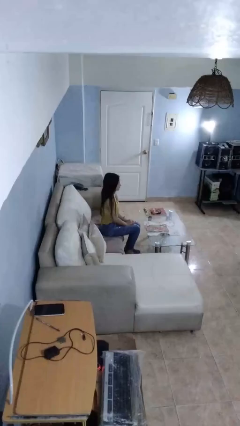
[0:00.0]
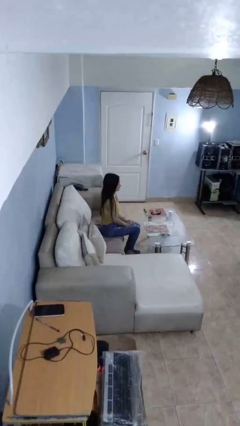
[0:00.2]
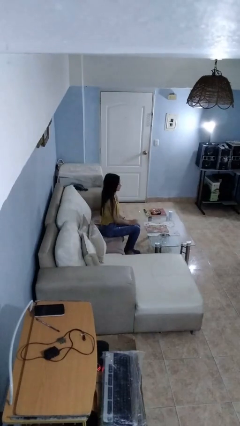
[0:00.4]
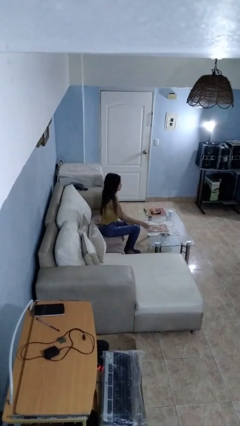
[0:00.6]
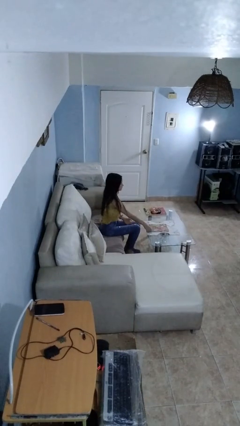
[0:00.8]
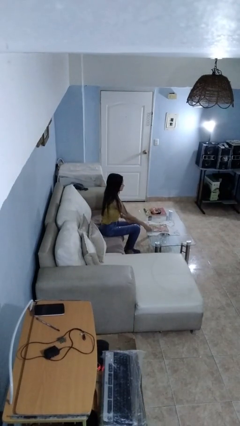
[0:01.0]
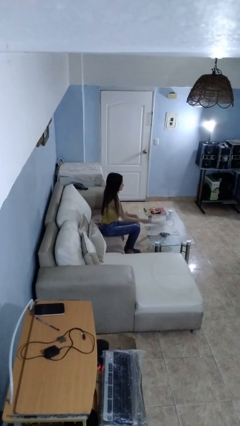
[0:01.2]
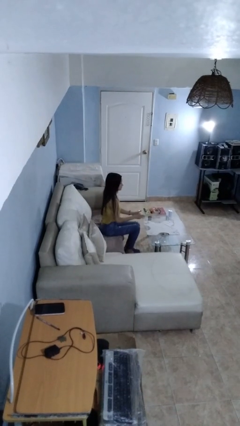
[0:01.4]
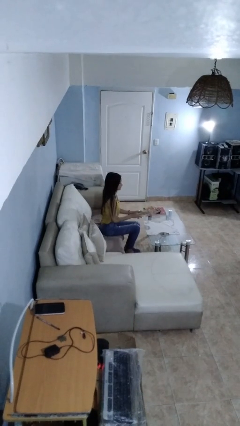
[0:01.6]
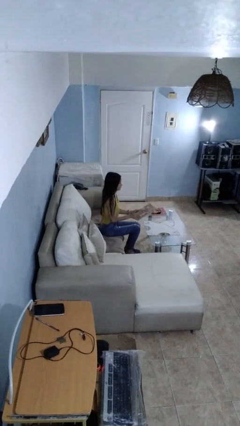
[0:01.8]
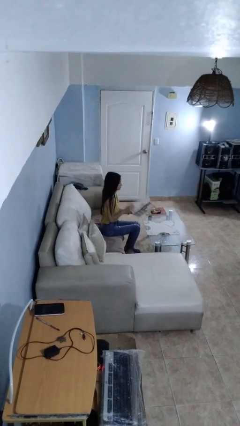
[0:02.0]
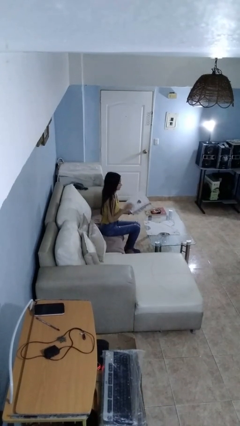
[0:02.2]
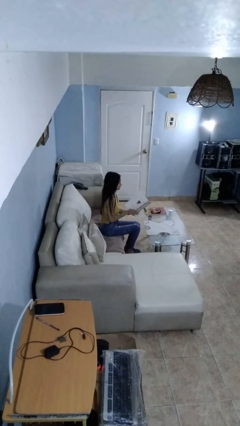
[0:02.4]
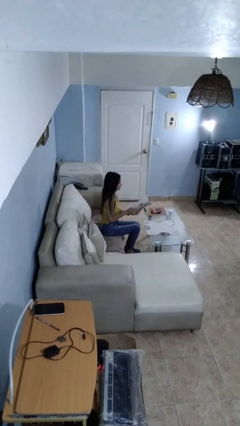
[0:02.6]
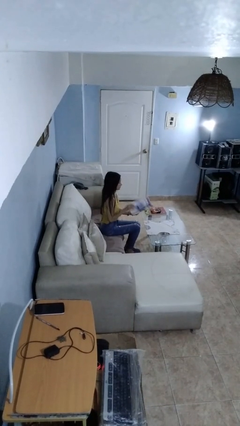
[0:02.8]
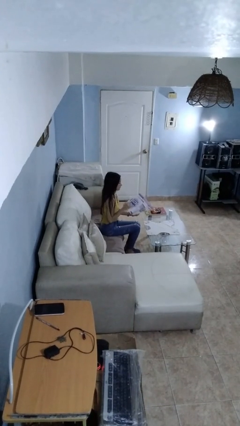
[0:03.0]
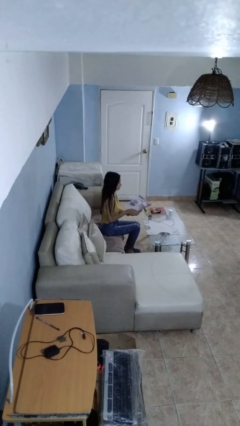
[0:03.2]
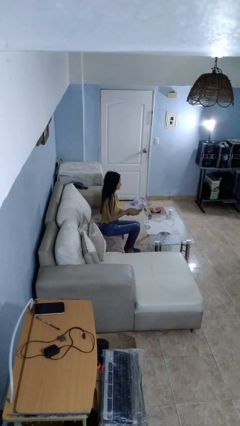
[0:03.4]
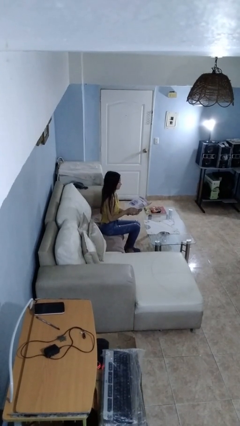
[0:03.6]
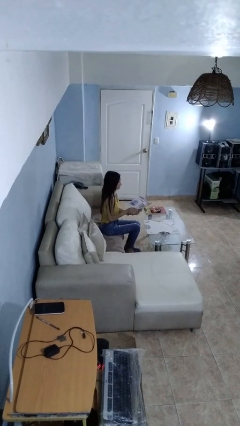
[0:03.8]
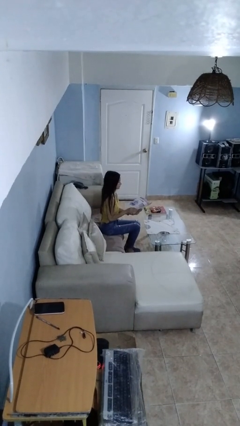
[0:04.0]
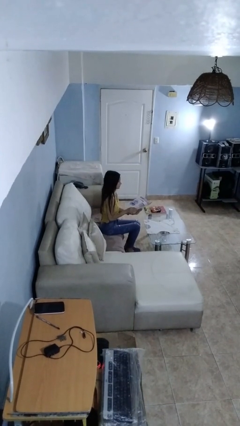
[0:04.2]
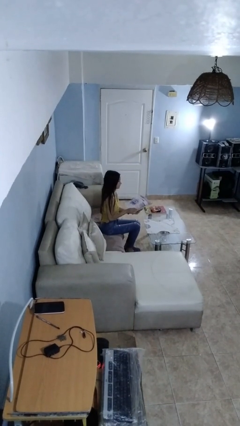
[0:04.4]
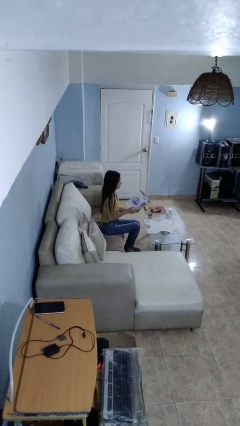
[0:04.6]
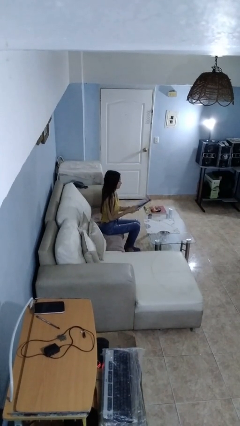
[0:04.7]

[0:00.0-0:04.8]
person reads magazine

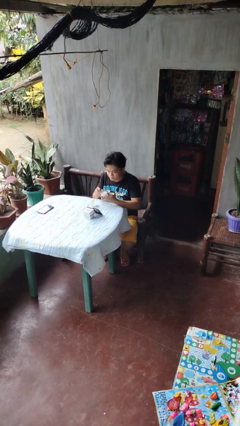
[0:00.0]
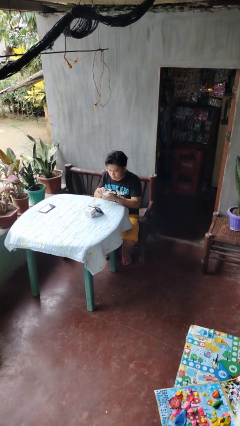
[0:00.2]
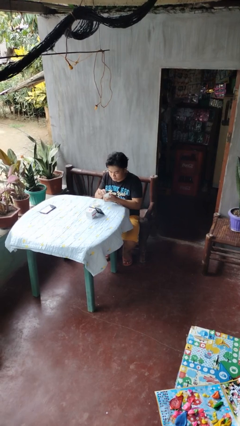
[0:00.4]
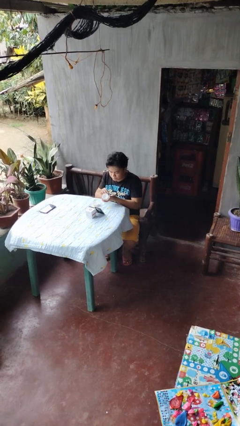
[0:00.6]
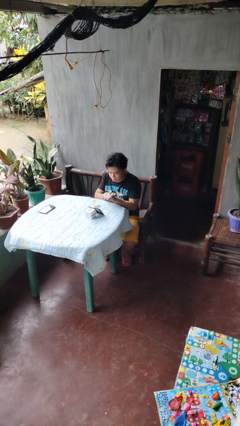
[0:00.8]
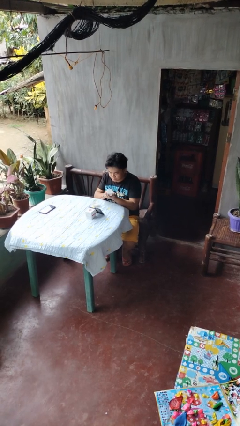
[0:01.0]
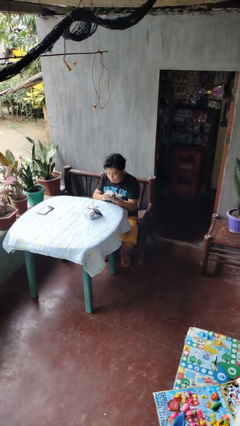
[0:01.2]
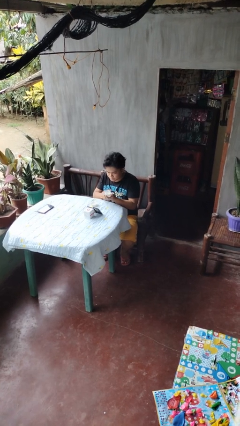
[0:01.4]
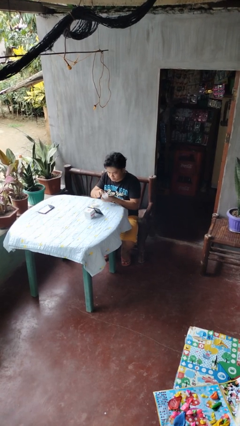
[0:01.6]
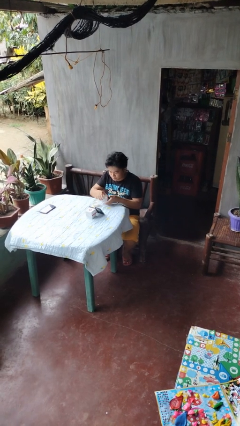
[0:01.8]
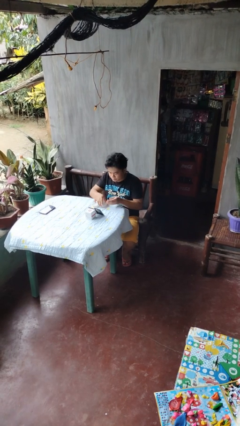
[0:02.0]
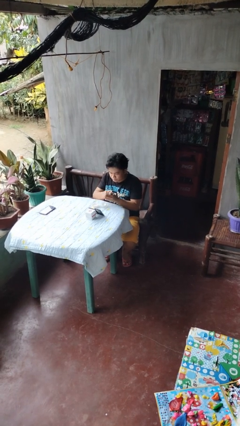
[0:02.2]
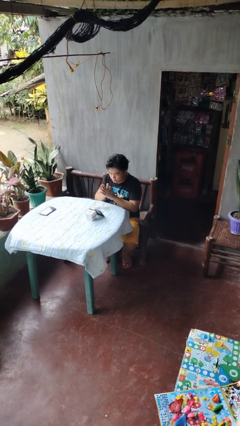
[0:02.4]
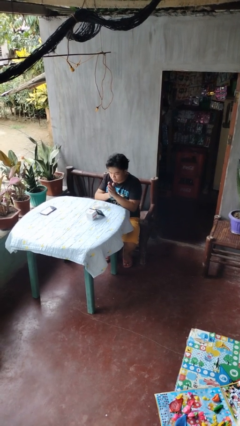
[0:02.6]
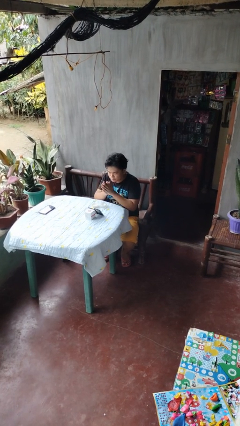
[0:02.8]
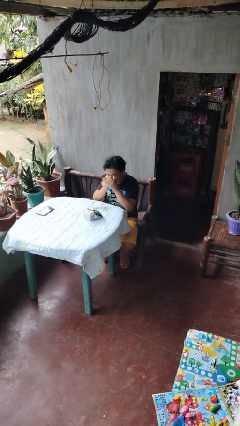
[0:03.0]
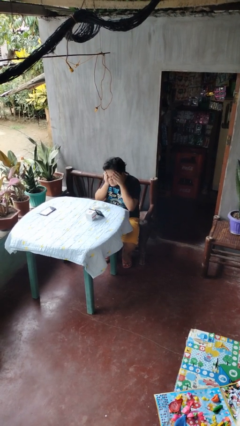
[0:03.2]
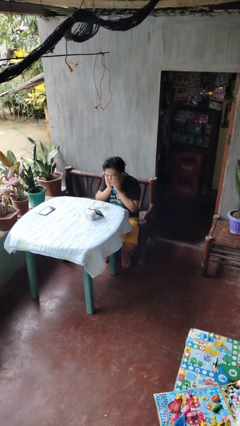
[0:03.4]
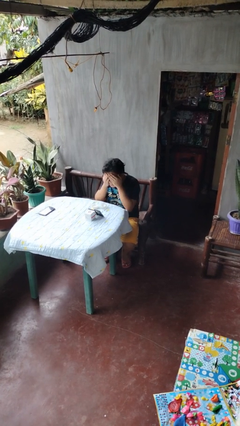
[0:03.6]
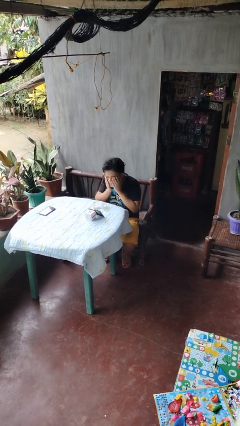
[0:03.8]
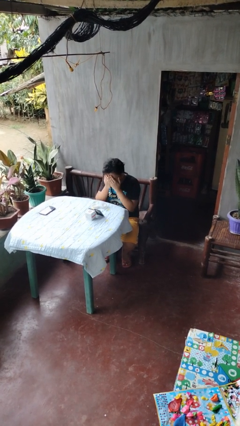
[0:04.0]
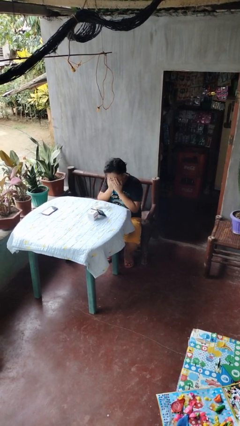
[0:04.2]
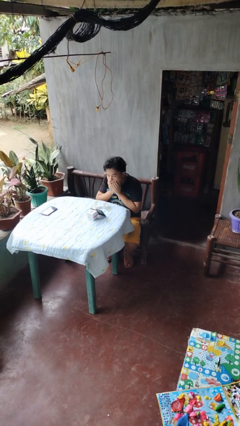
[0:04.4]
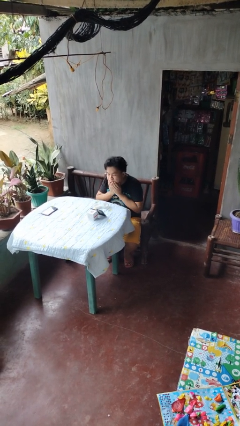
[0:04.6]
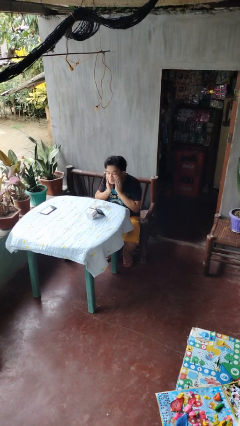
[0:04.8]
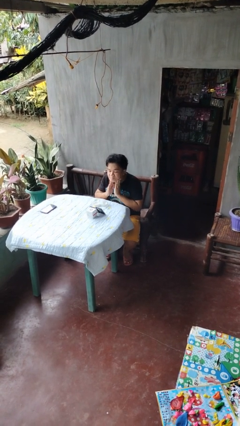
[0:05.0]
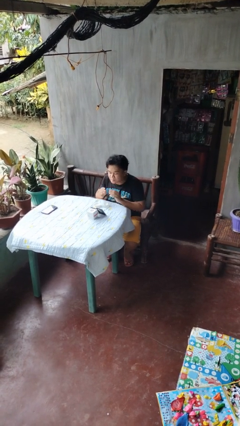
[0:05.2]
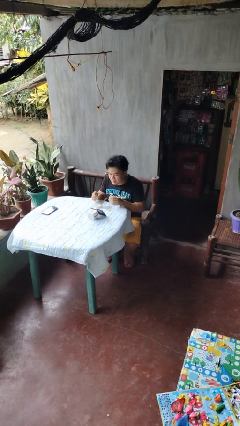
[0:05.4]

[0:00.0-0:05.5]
person applies facial moisturizer

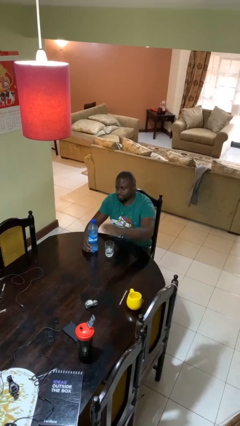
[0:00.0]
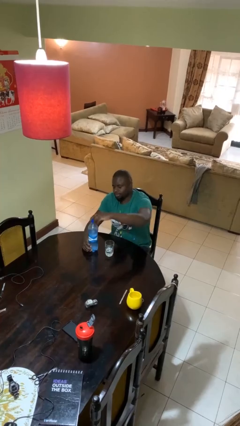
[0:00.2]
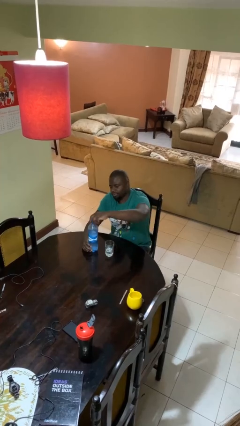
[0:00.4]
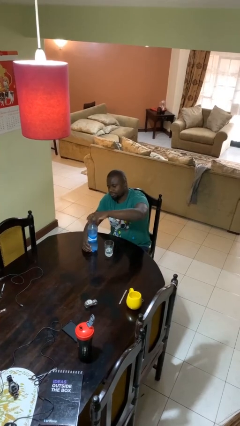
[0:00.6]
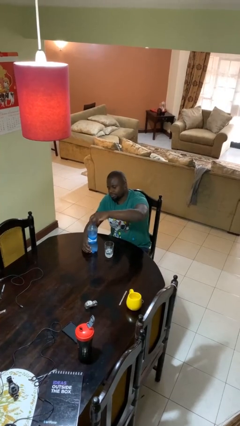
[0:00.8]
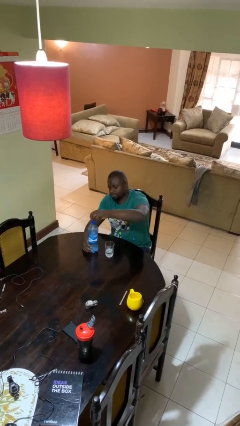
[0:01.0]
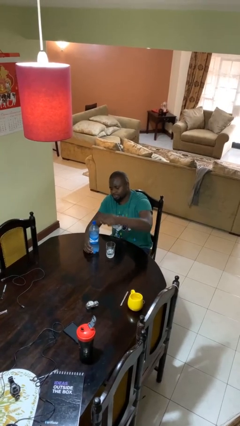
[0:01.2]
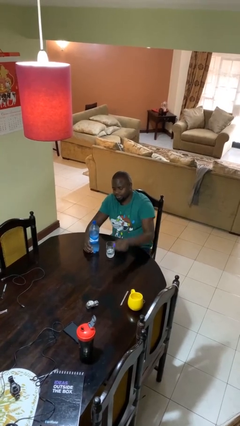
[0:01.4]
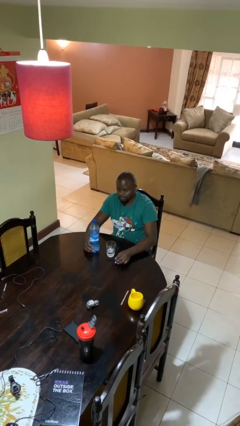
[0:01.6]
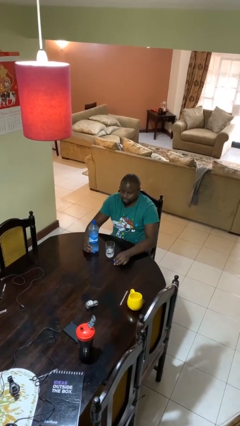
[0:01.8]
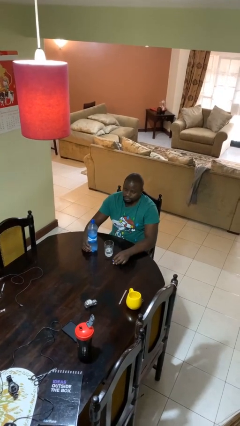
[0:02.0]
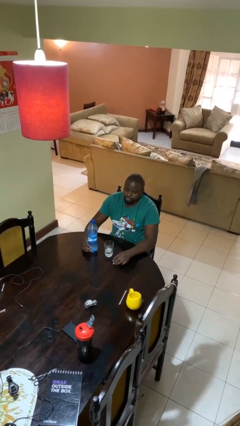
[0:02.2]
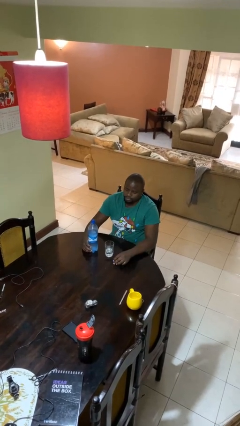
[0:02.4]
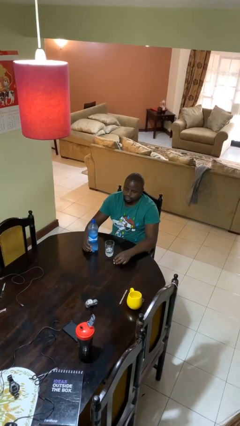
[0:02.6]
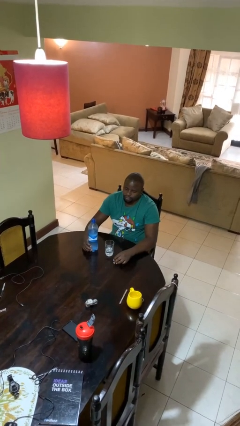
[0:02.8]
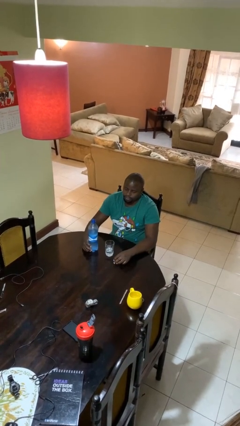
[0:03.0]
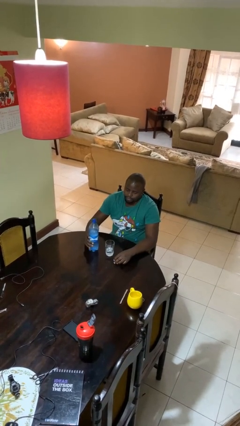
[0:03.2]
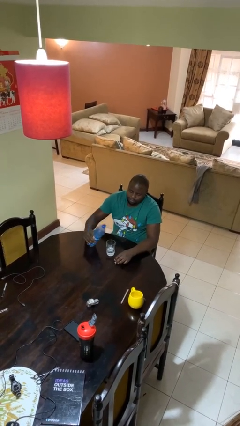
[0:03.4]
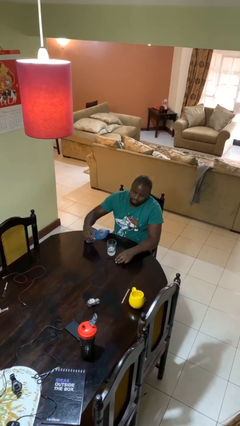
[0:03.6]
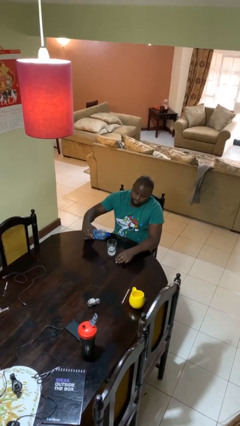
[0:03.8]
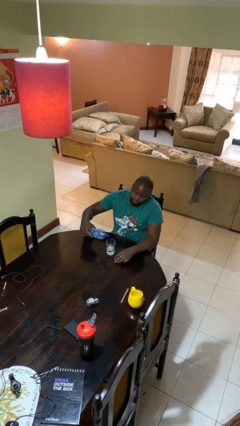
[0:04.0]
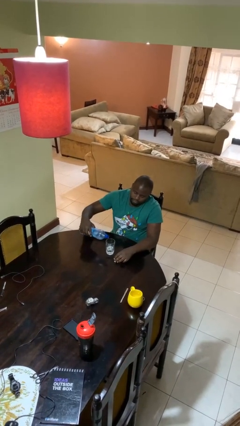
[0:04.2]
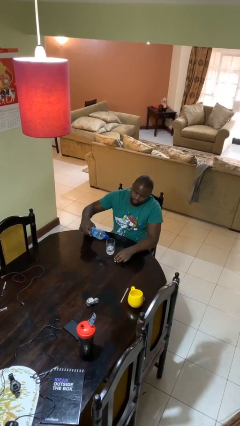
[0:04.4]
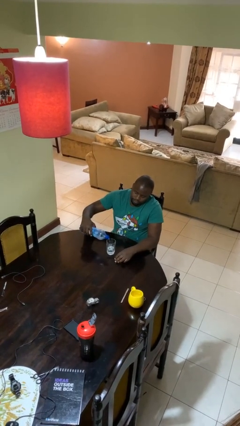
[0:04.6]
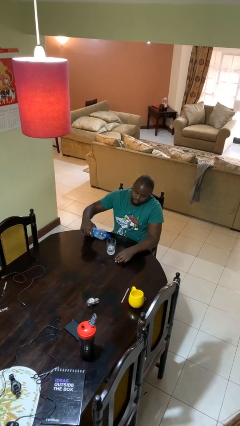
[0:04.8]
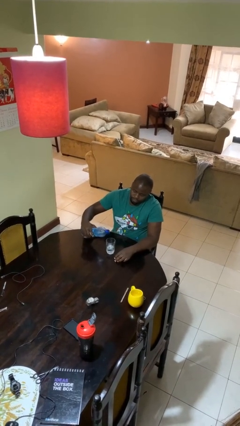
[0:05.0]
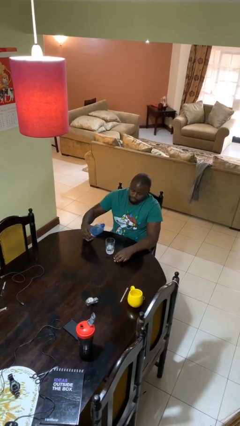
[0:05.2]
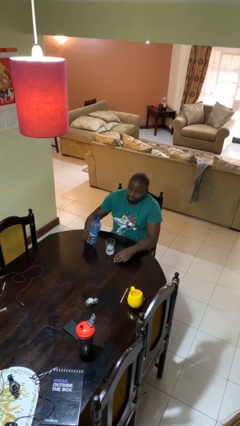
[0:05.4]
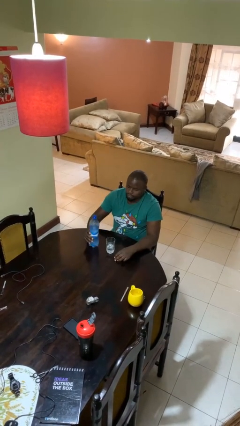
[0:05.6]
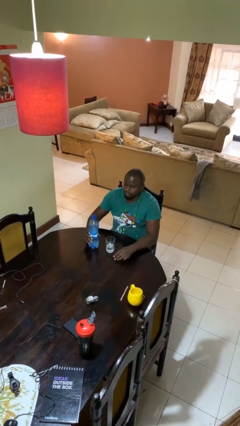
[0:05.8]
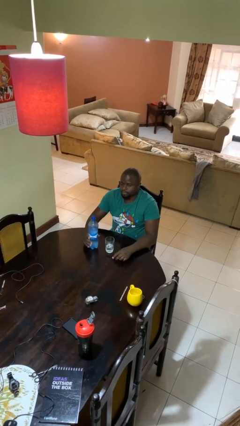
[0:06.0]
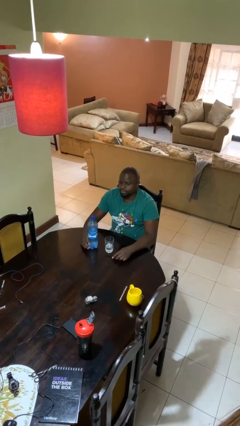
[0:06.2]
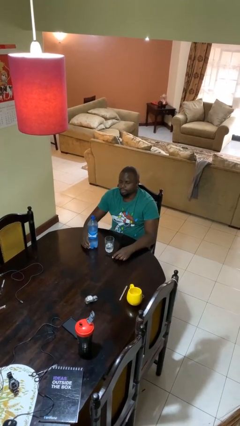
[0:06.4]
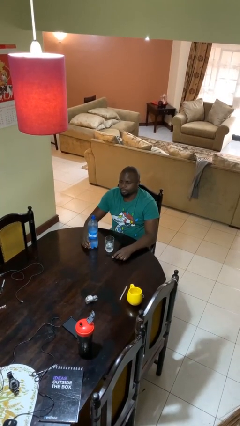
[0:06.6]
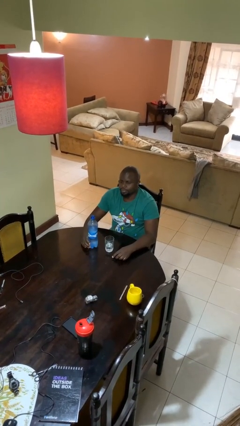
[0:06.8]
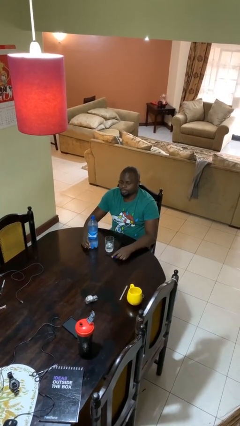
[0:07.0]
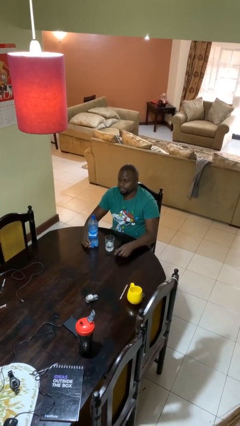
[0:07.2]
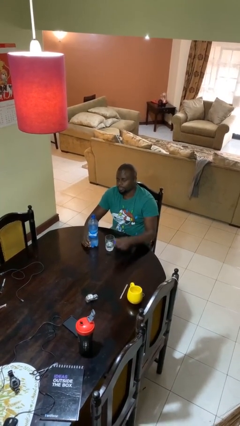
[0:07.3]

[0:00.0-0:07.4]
person unscrews lid from bottle

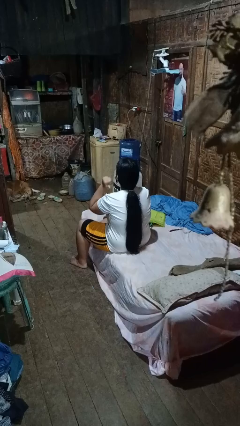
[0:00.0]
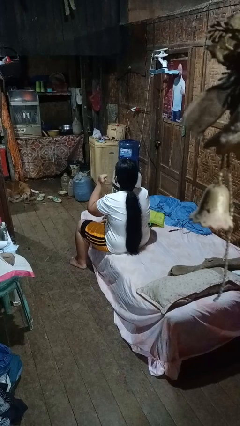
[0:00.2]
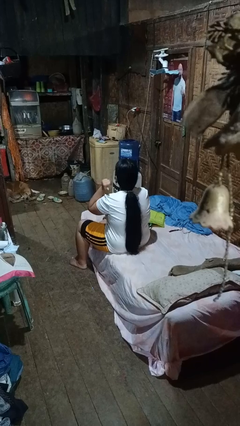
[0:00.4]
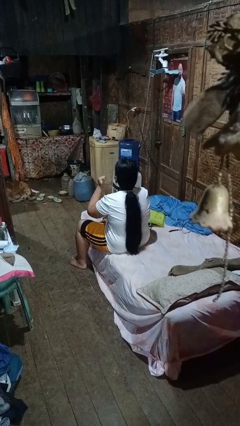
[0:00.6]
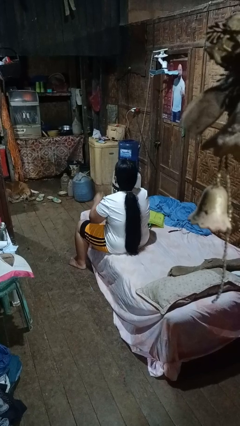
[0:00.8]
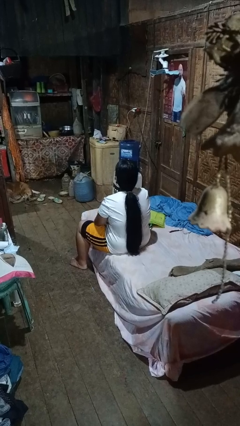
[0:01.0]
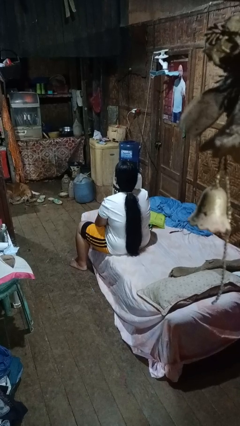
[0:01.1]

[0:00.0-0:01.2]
person gestures behind me
